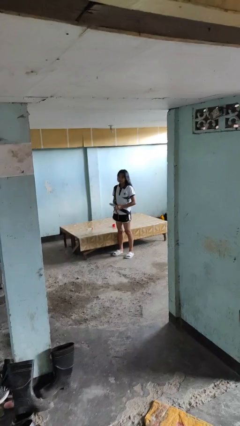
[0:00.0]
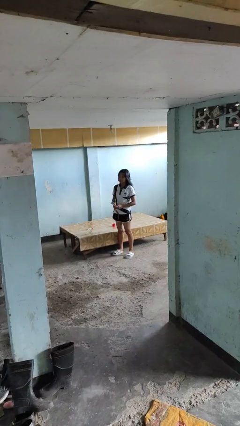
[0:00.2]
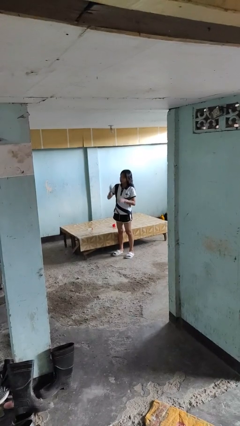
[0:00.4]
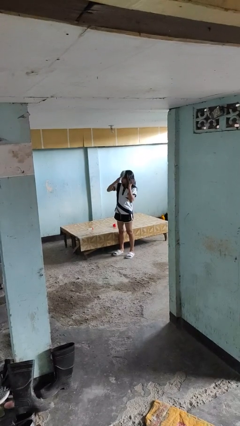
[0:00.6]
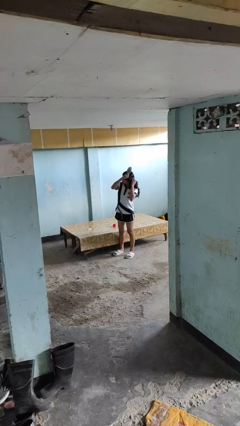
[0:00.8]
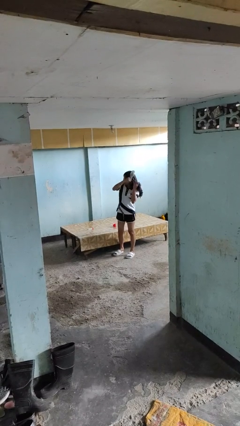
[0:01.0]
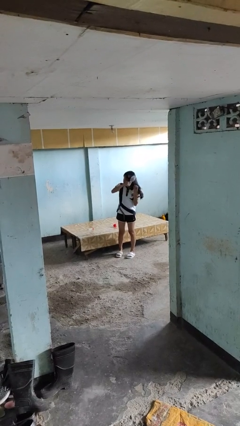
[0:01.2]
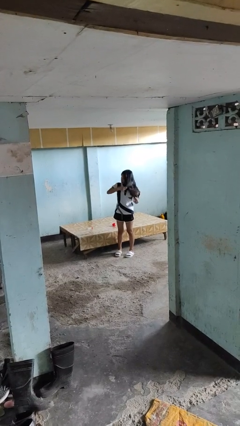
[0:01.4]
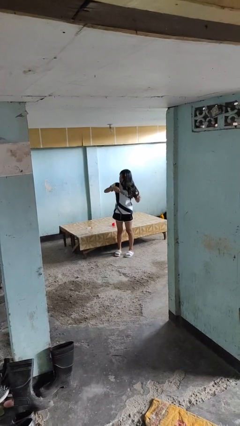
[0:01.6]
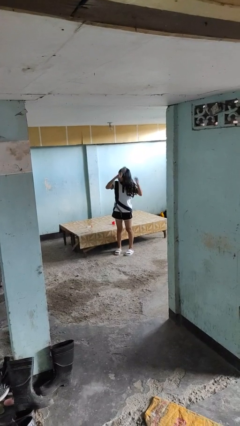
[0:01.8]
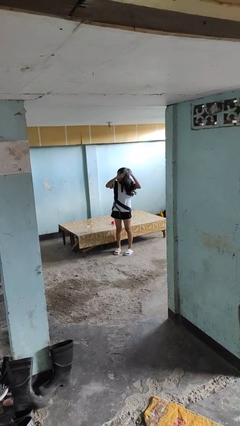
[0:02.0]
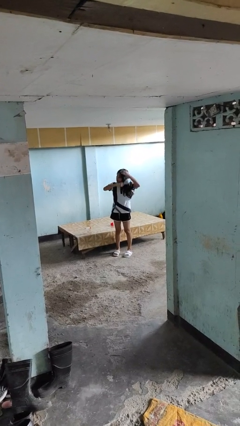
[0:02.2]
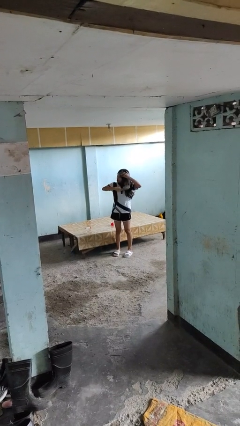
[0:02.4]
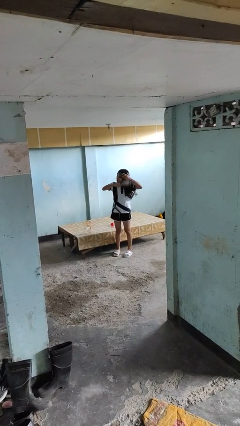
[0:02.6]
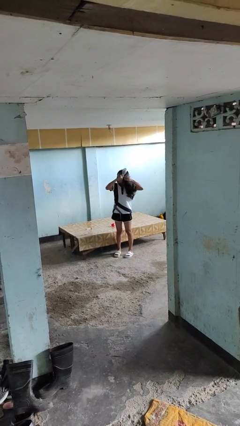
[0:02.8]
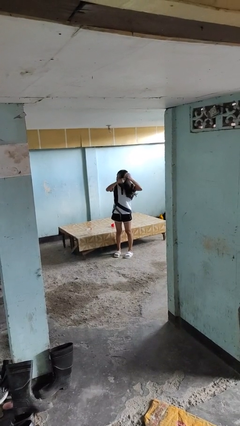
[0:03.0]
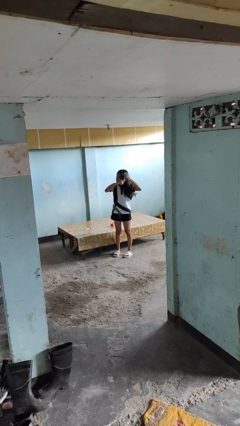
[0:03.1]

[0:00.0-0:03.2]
person brushes hair

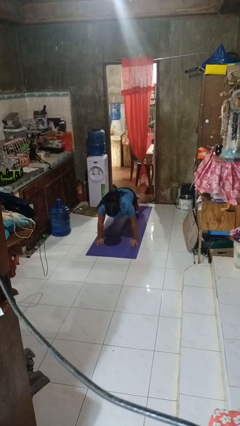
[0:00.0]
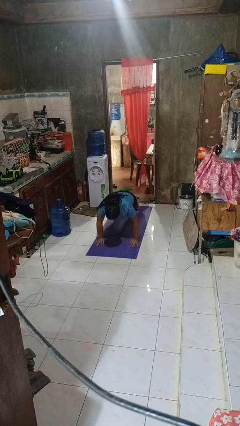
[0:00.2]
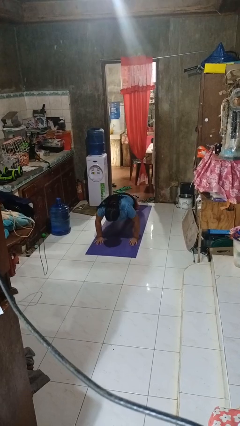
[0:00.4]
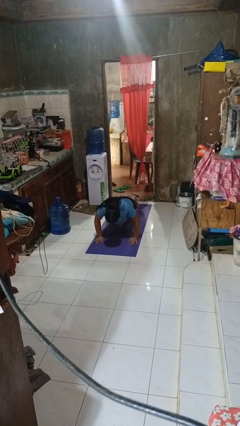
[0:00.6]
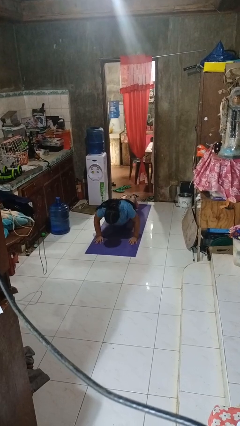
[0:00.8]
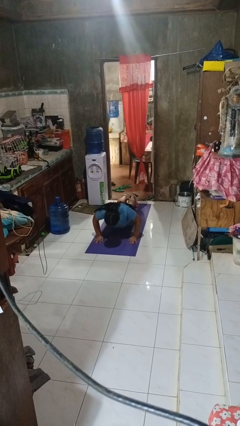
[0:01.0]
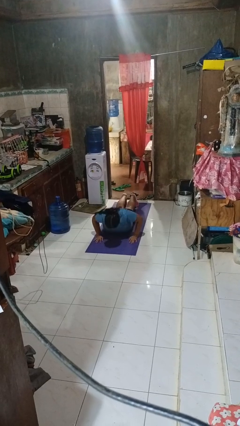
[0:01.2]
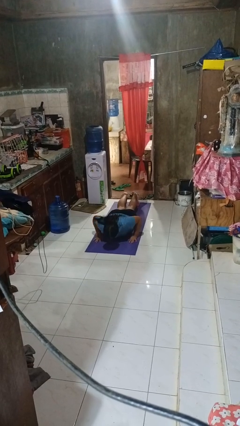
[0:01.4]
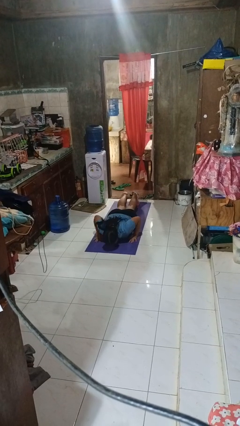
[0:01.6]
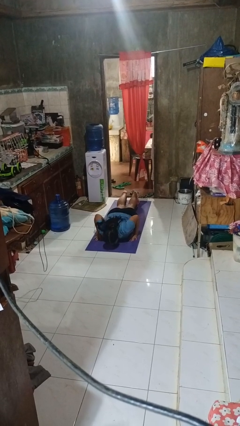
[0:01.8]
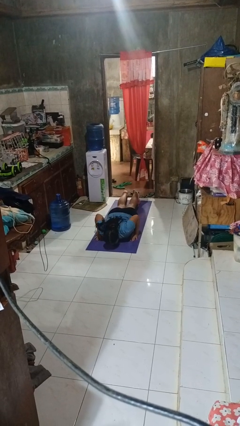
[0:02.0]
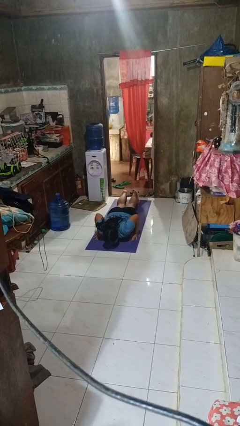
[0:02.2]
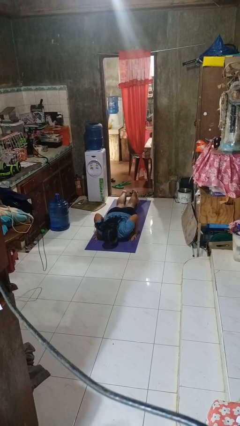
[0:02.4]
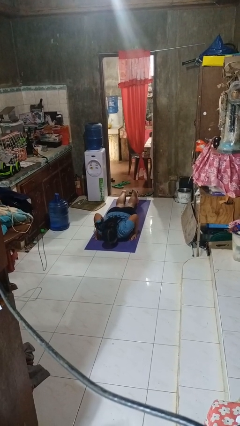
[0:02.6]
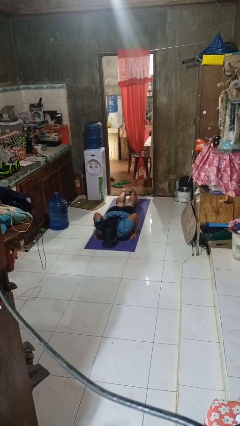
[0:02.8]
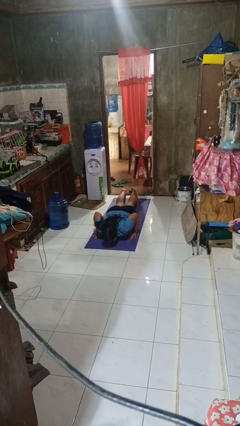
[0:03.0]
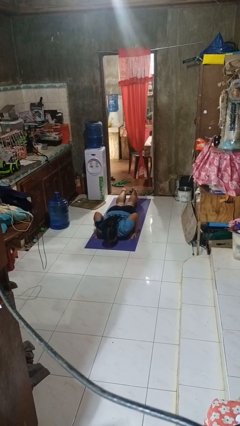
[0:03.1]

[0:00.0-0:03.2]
person exercises with pushup

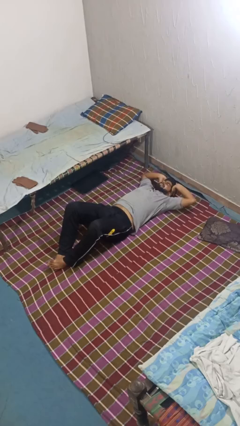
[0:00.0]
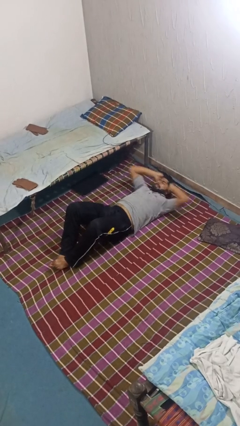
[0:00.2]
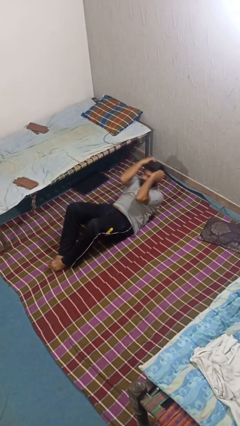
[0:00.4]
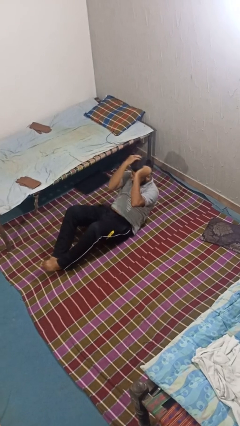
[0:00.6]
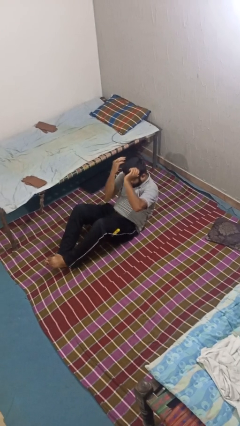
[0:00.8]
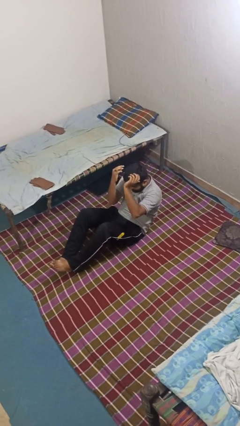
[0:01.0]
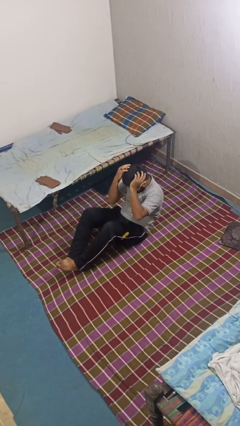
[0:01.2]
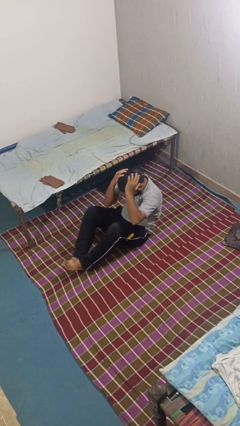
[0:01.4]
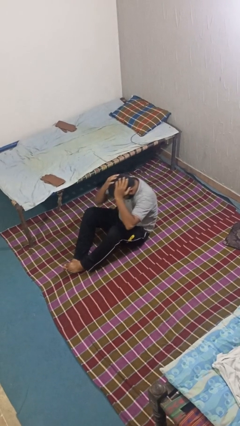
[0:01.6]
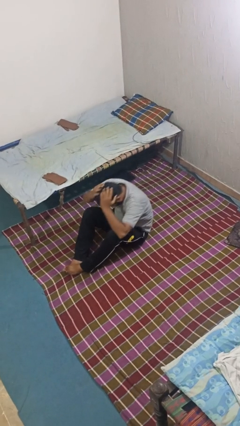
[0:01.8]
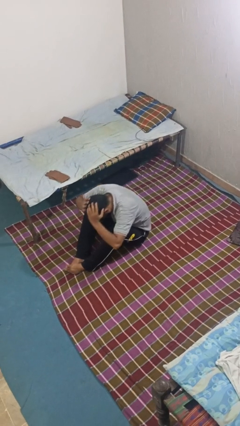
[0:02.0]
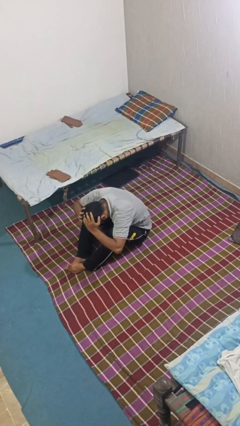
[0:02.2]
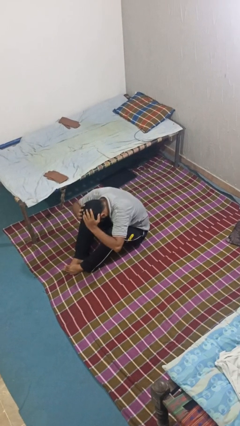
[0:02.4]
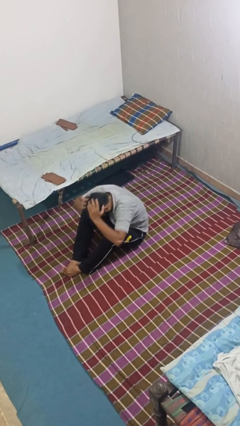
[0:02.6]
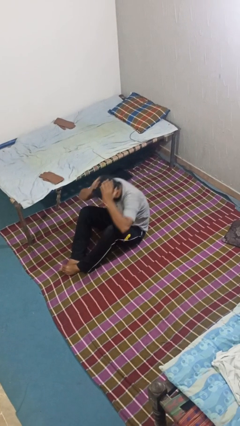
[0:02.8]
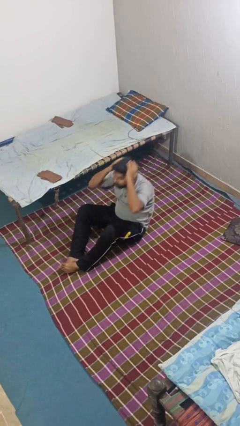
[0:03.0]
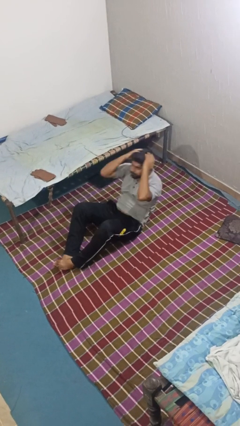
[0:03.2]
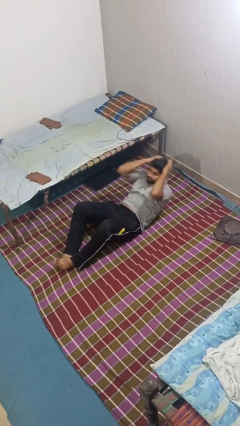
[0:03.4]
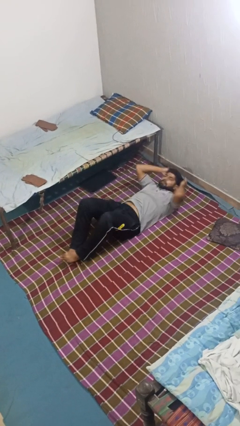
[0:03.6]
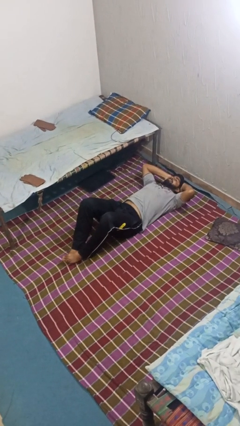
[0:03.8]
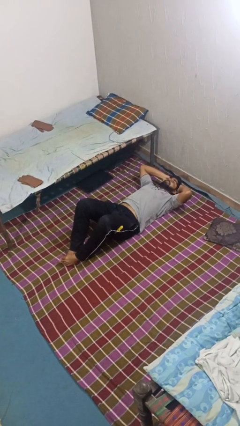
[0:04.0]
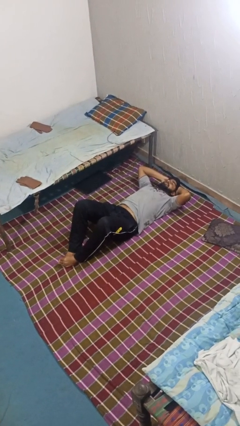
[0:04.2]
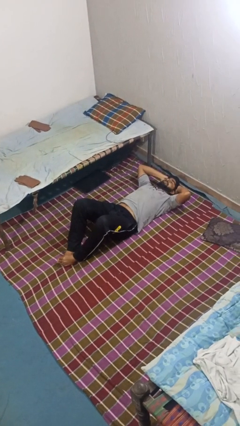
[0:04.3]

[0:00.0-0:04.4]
person exercises with situp

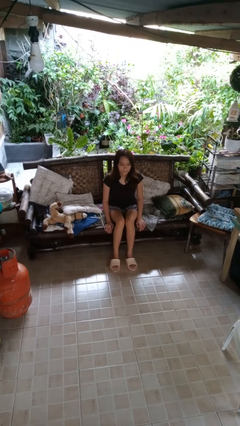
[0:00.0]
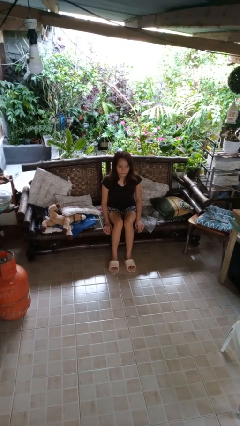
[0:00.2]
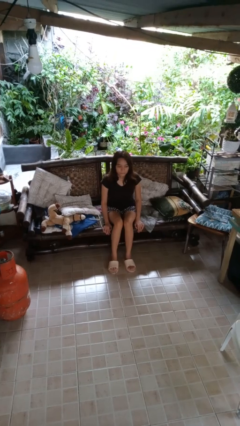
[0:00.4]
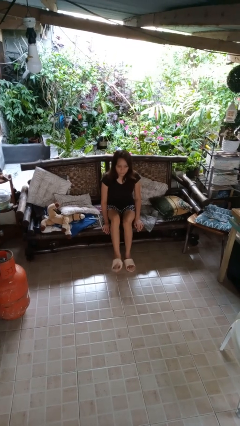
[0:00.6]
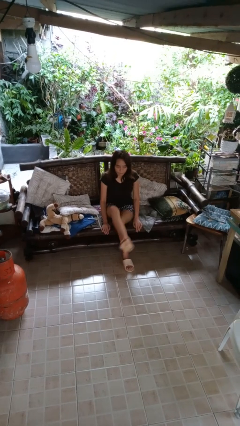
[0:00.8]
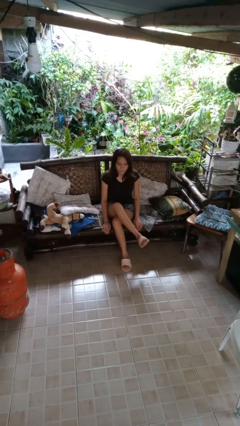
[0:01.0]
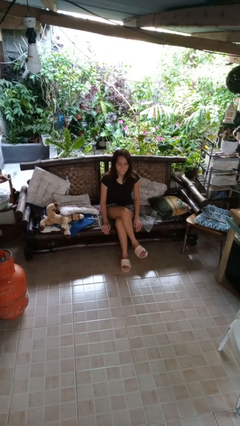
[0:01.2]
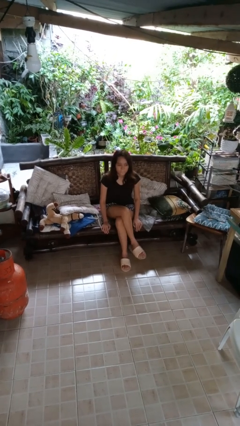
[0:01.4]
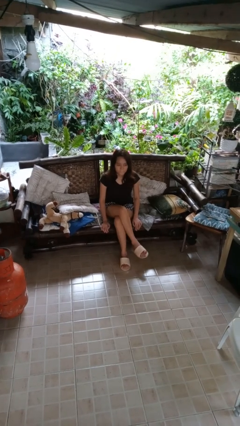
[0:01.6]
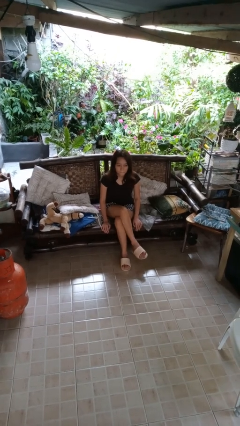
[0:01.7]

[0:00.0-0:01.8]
person crosses legs

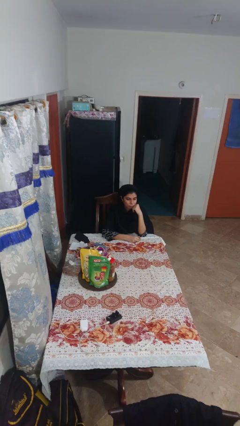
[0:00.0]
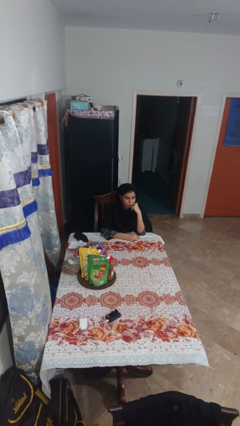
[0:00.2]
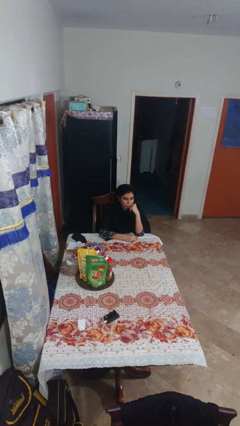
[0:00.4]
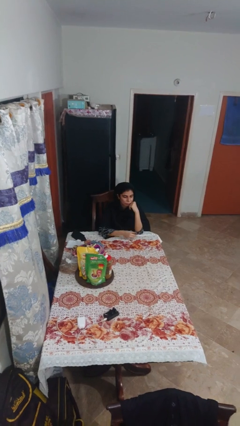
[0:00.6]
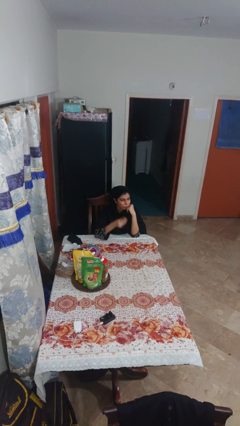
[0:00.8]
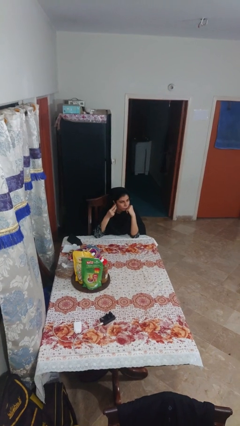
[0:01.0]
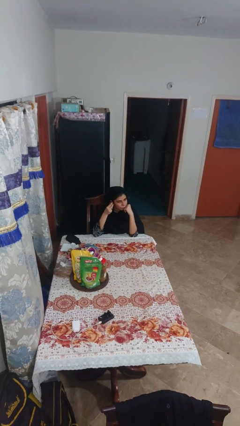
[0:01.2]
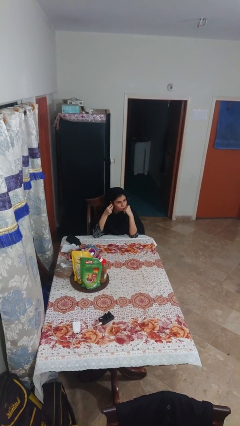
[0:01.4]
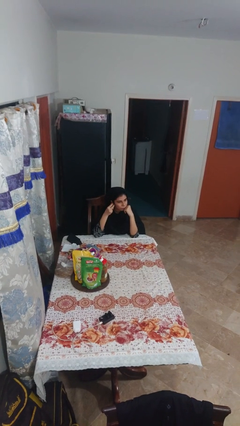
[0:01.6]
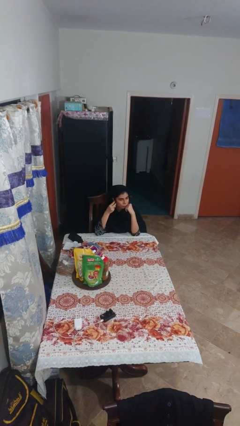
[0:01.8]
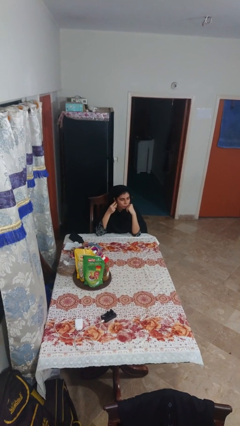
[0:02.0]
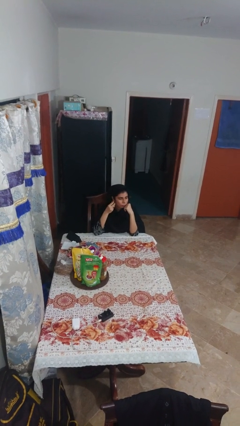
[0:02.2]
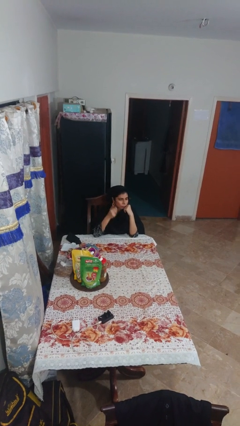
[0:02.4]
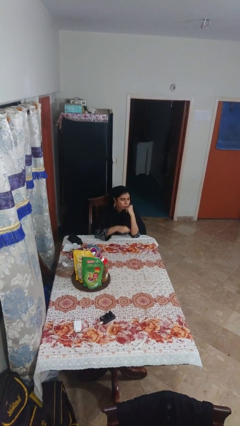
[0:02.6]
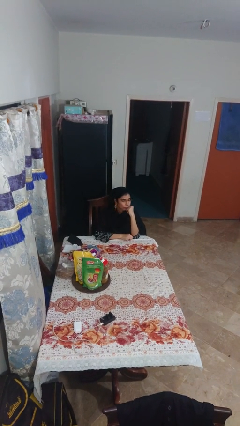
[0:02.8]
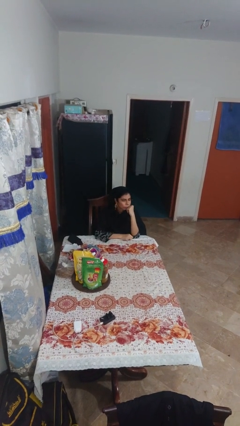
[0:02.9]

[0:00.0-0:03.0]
person puts on earrings

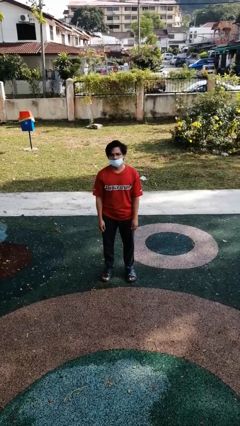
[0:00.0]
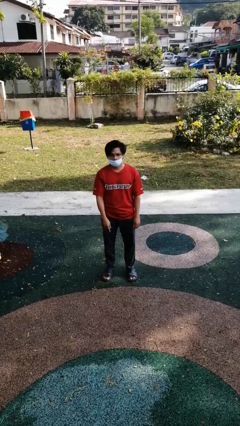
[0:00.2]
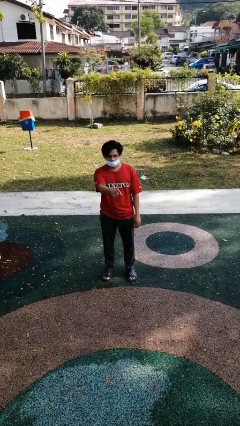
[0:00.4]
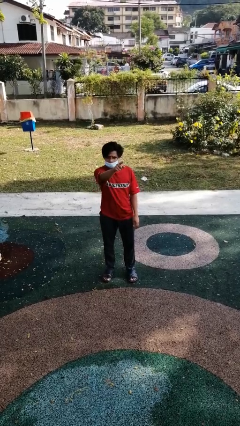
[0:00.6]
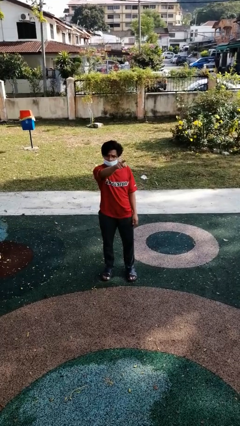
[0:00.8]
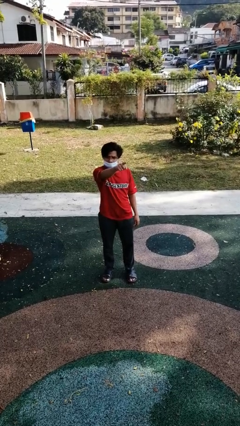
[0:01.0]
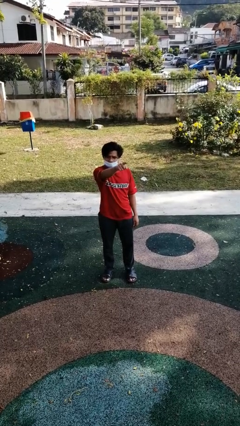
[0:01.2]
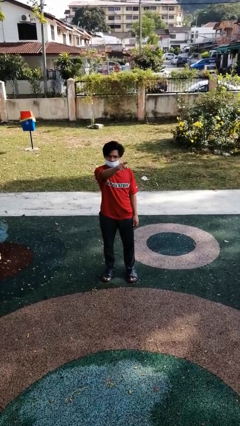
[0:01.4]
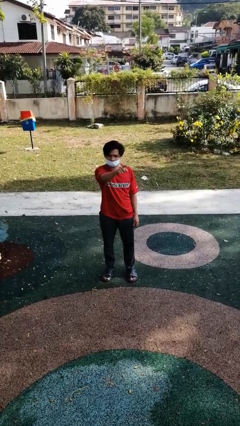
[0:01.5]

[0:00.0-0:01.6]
person points at person
